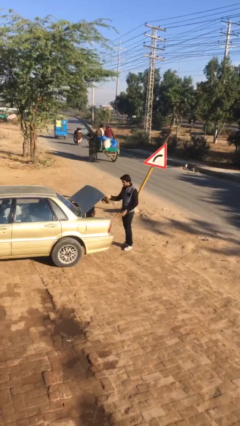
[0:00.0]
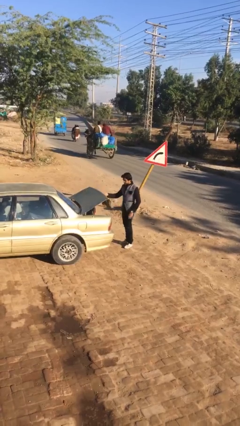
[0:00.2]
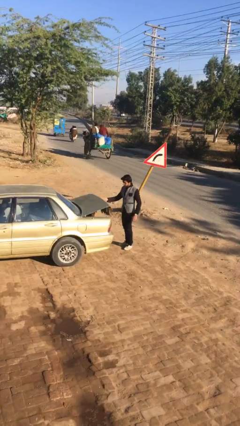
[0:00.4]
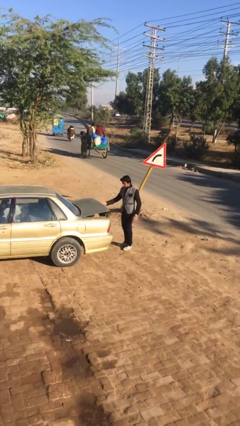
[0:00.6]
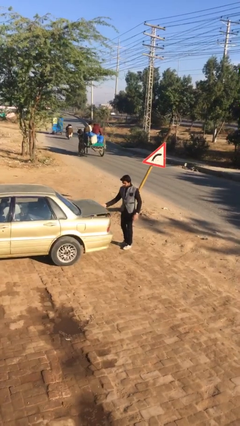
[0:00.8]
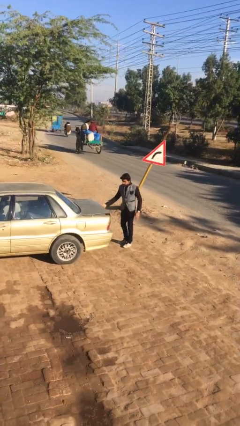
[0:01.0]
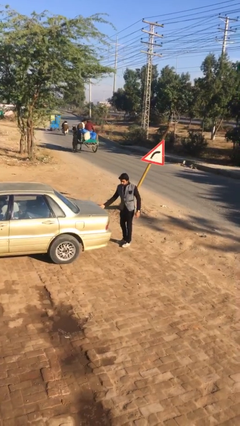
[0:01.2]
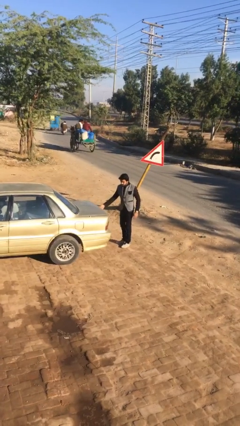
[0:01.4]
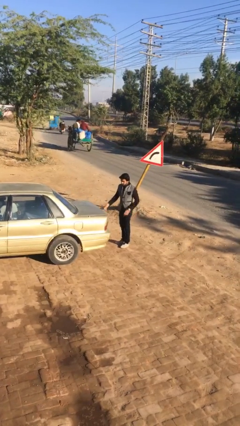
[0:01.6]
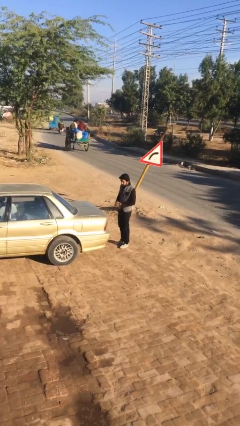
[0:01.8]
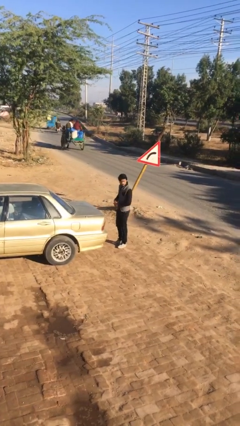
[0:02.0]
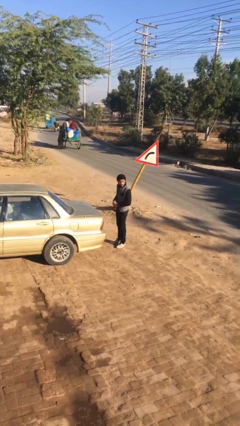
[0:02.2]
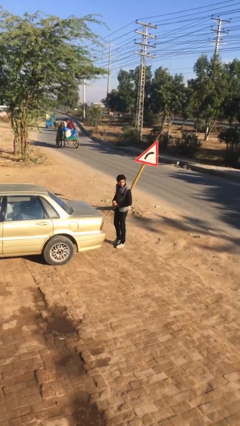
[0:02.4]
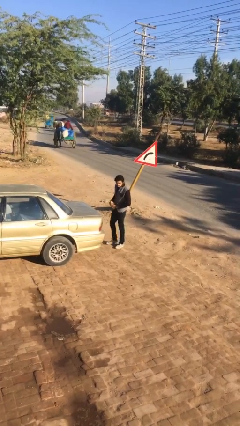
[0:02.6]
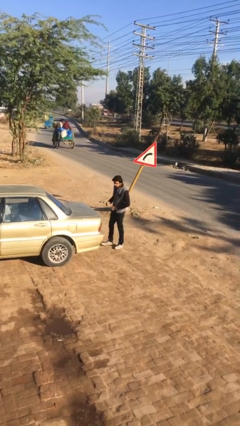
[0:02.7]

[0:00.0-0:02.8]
person closes car trunk

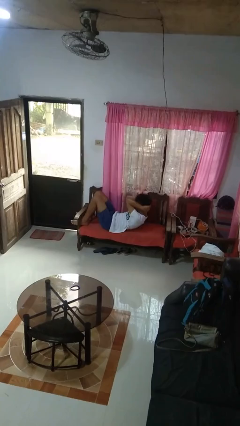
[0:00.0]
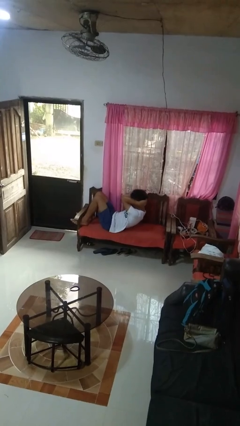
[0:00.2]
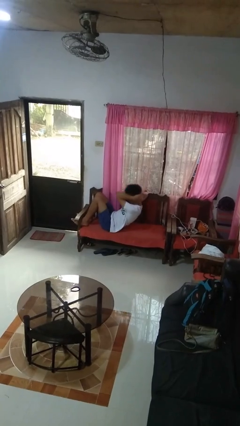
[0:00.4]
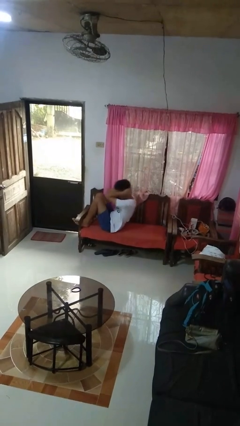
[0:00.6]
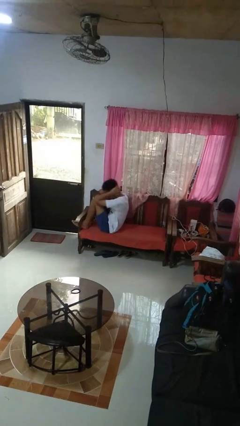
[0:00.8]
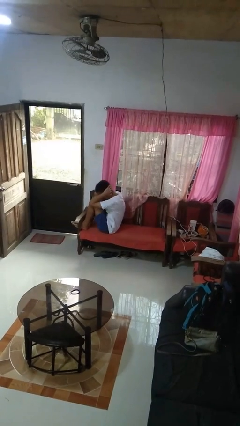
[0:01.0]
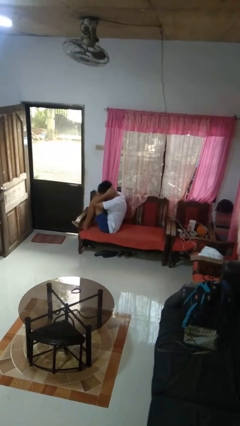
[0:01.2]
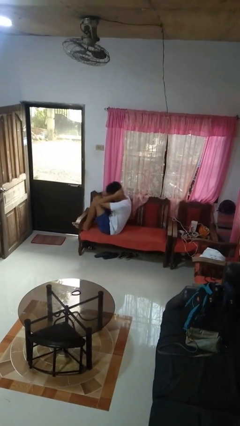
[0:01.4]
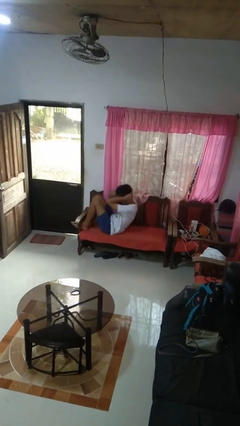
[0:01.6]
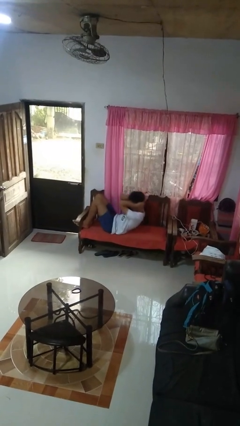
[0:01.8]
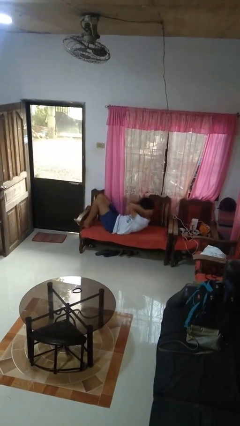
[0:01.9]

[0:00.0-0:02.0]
person exercises with situp

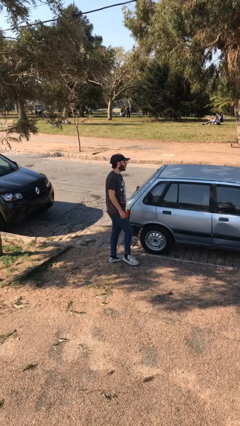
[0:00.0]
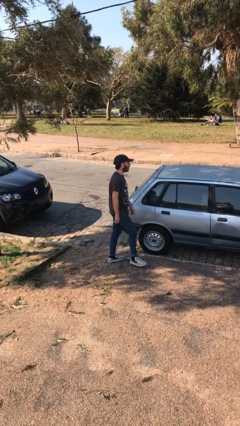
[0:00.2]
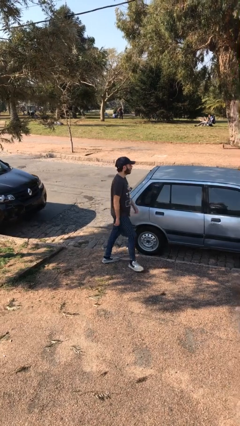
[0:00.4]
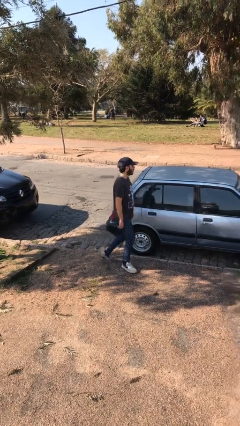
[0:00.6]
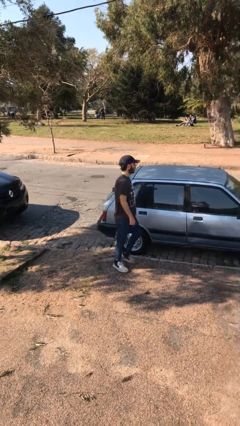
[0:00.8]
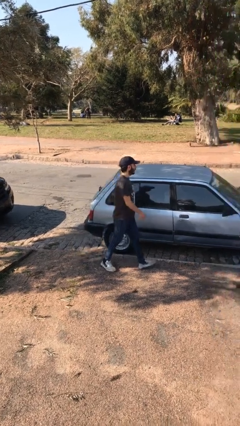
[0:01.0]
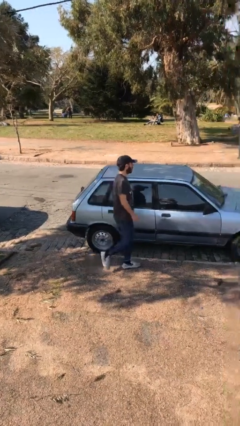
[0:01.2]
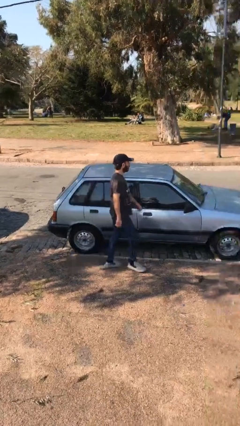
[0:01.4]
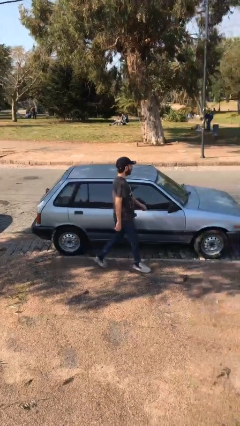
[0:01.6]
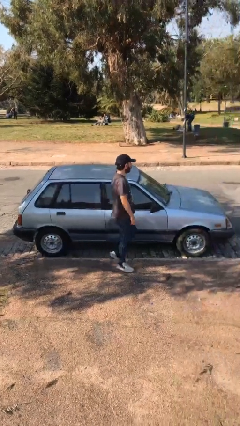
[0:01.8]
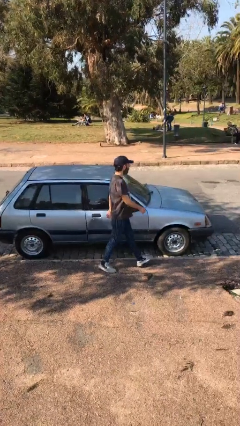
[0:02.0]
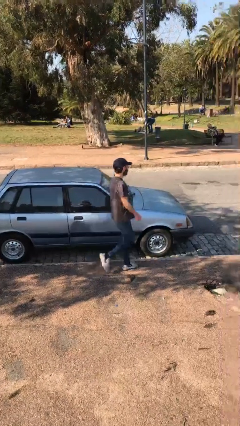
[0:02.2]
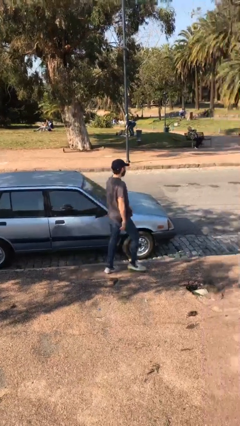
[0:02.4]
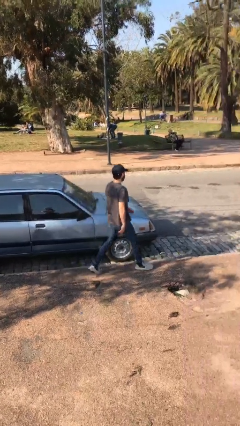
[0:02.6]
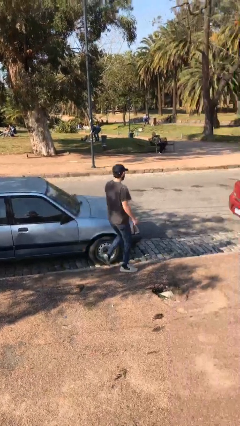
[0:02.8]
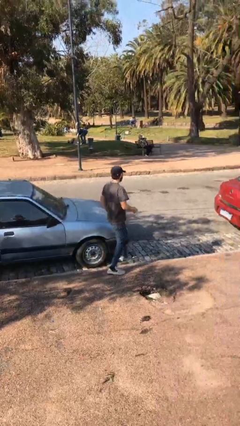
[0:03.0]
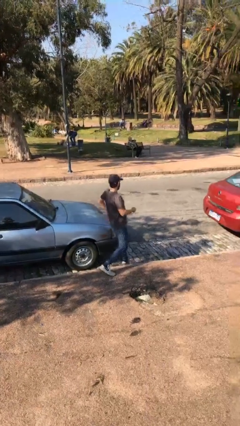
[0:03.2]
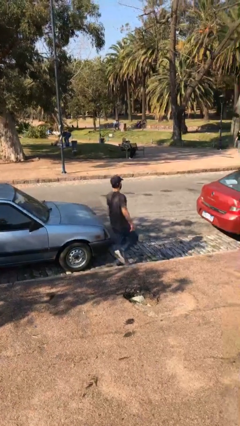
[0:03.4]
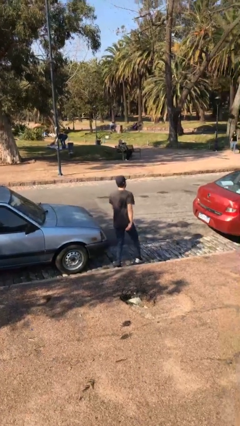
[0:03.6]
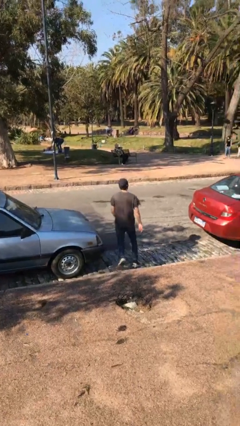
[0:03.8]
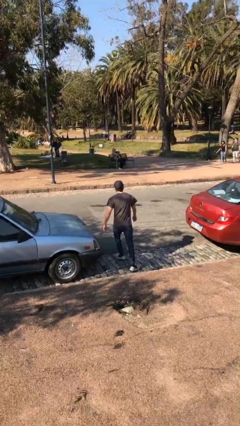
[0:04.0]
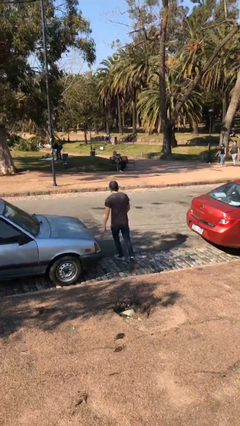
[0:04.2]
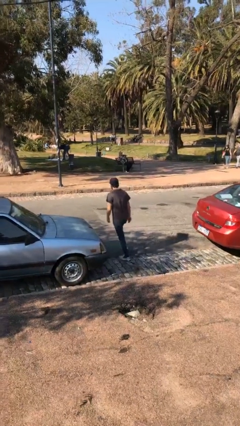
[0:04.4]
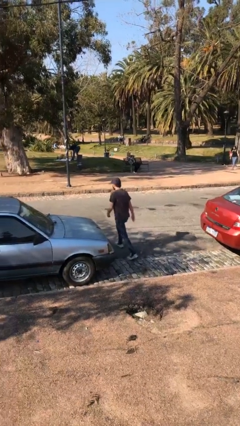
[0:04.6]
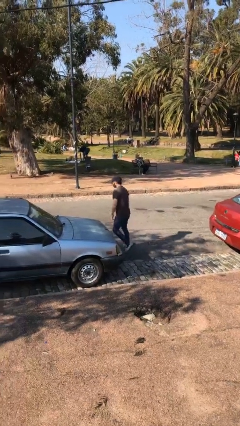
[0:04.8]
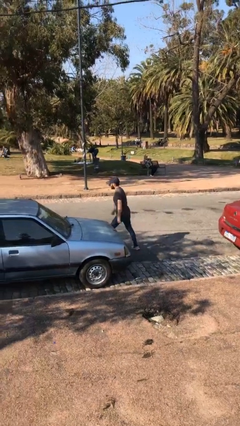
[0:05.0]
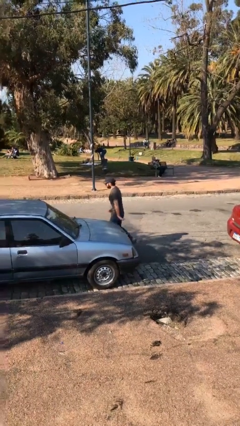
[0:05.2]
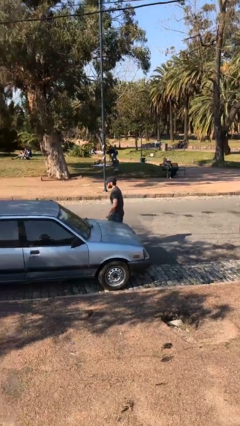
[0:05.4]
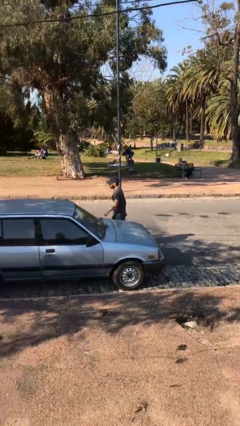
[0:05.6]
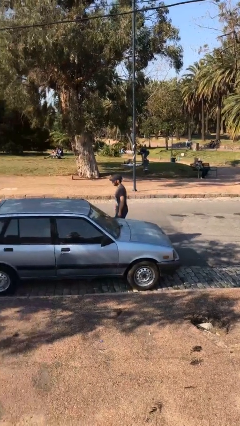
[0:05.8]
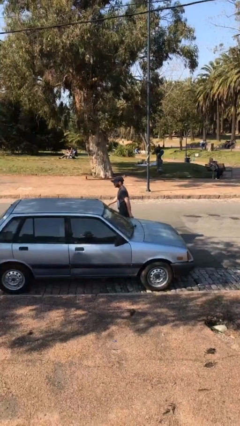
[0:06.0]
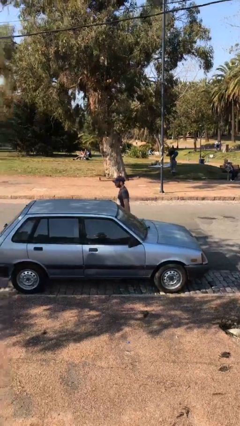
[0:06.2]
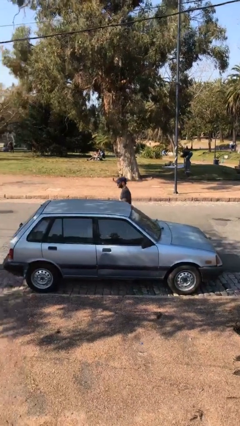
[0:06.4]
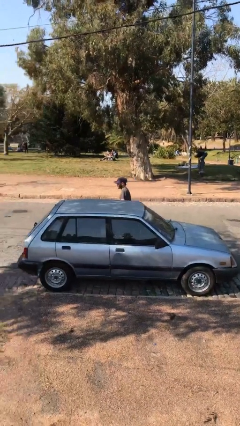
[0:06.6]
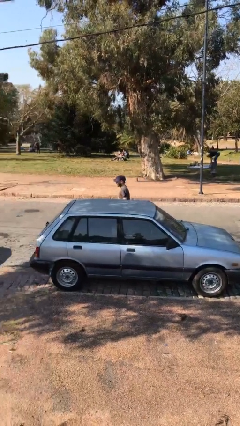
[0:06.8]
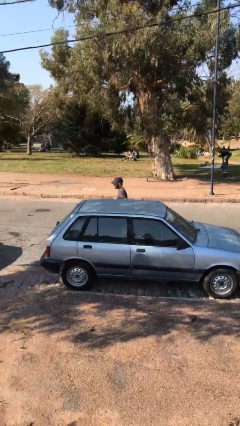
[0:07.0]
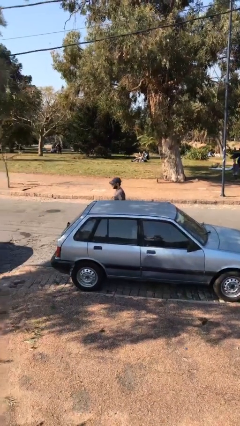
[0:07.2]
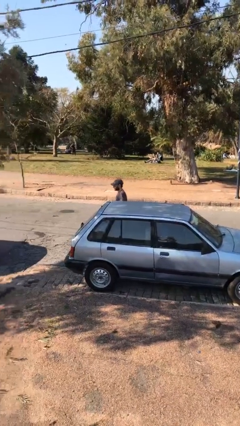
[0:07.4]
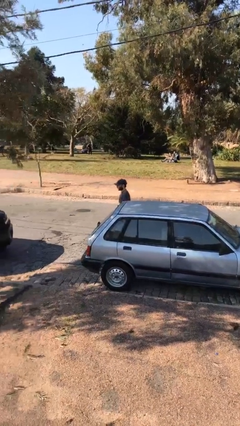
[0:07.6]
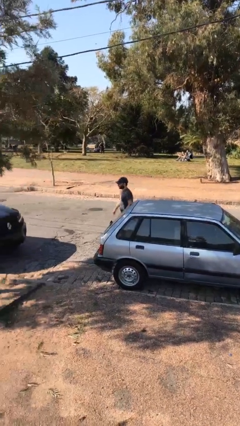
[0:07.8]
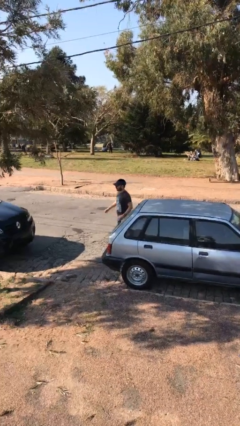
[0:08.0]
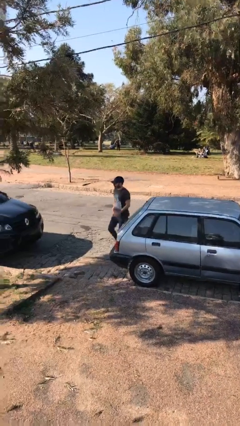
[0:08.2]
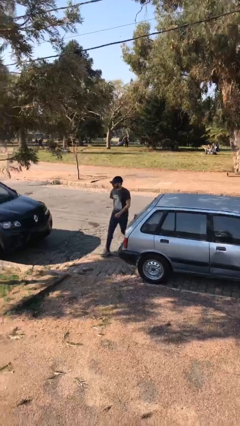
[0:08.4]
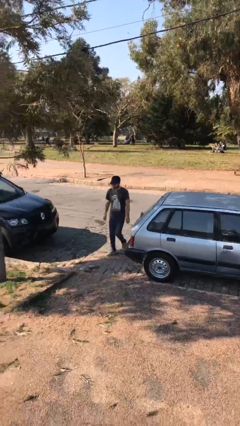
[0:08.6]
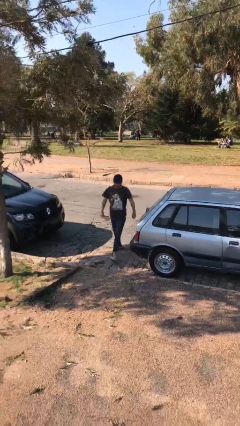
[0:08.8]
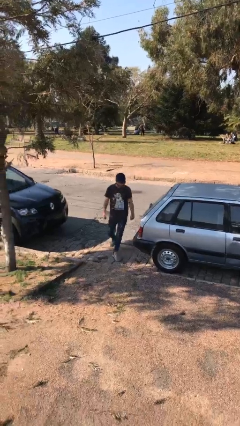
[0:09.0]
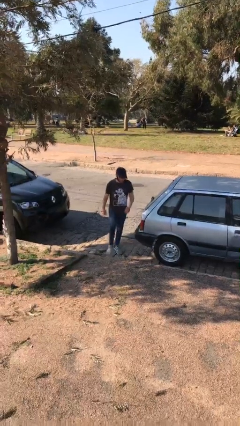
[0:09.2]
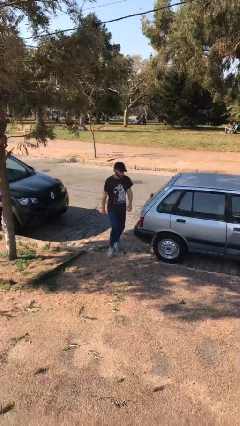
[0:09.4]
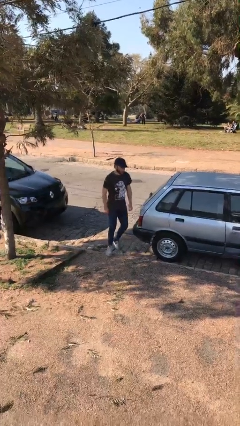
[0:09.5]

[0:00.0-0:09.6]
person walks around car

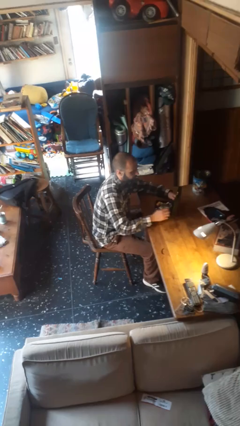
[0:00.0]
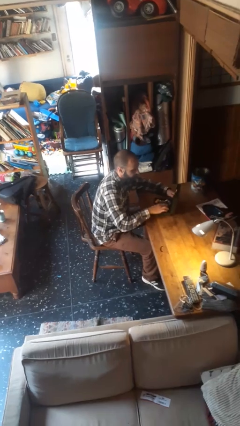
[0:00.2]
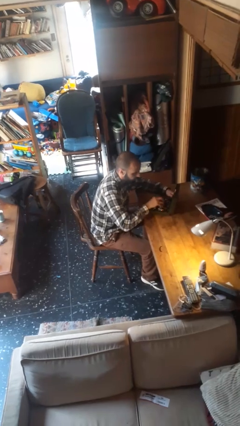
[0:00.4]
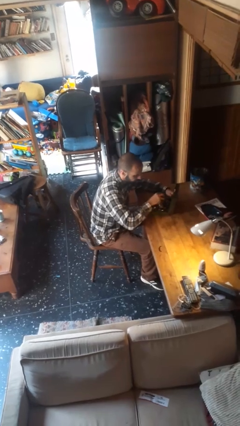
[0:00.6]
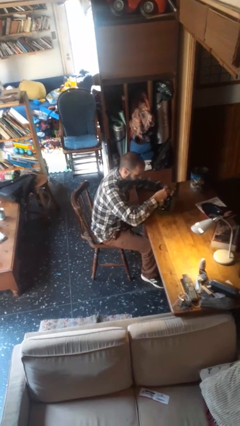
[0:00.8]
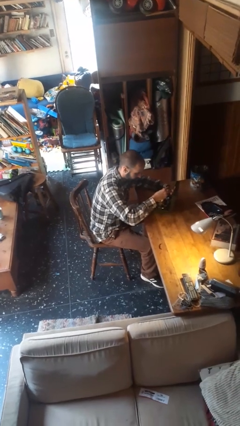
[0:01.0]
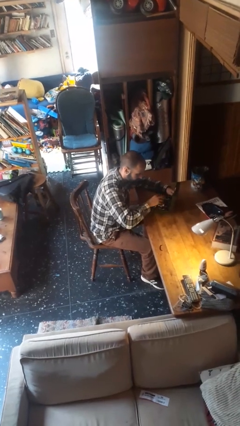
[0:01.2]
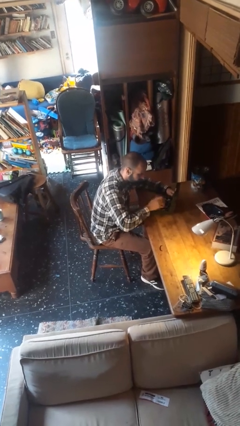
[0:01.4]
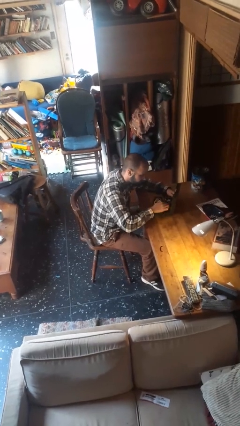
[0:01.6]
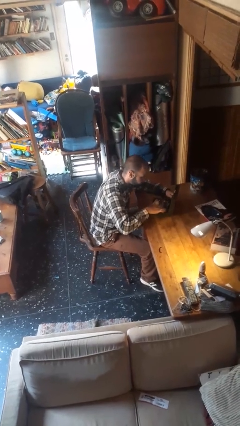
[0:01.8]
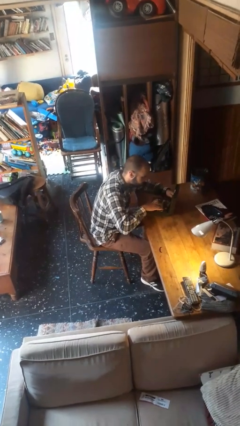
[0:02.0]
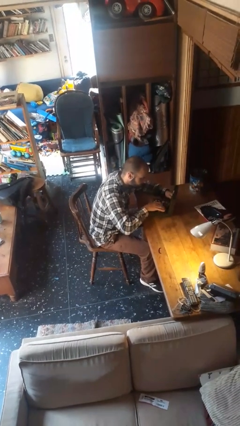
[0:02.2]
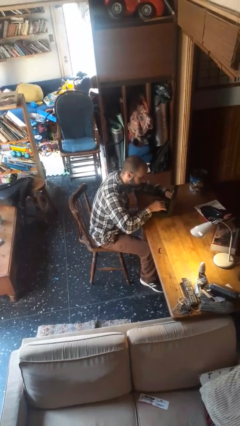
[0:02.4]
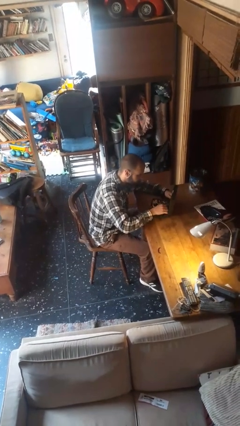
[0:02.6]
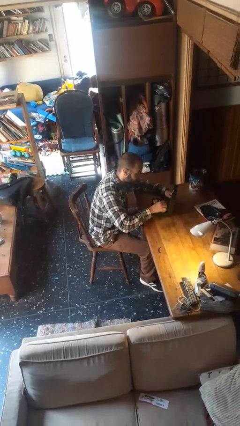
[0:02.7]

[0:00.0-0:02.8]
person searches jewelry box

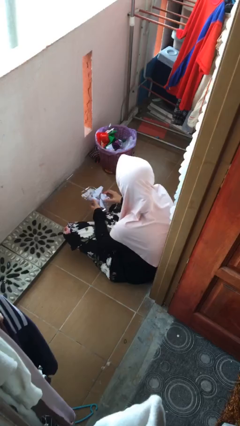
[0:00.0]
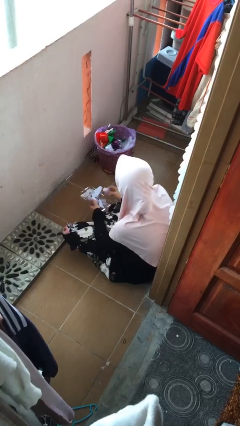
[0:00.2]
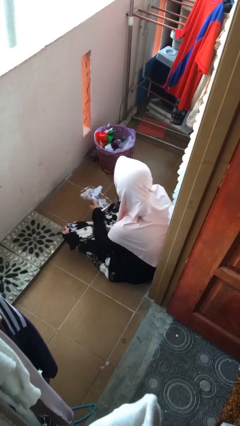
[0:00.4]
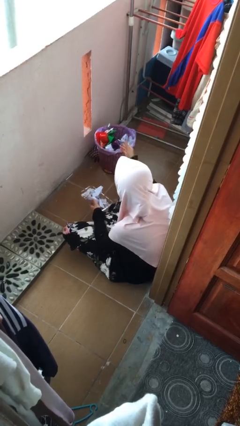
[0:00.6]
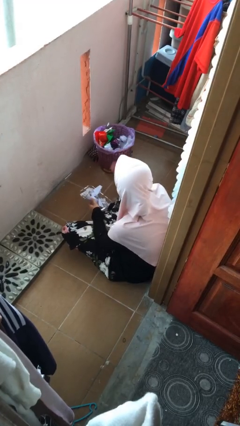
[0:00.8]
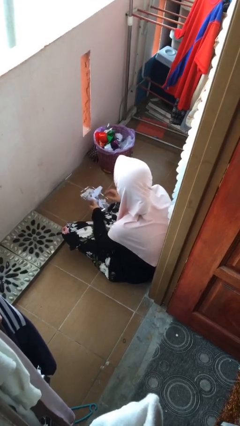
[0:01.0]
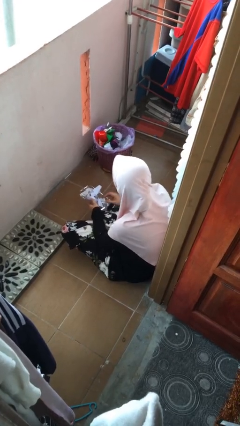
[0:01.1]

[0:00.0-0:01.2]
person discards trash
